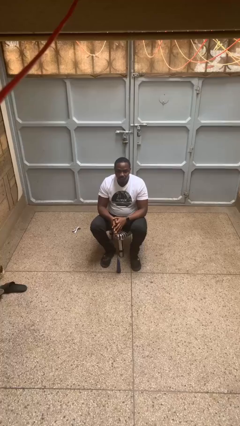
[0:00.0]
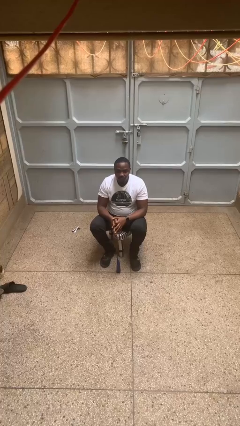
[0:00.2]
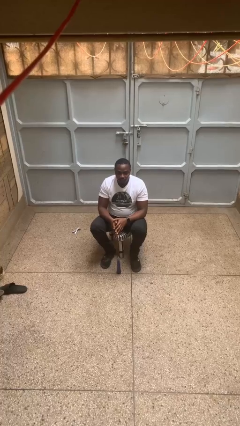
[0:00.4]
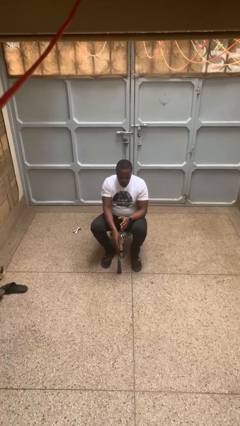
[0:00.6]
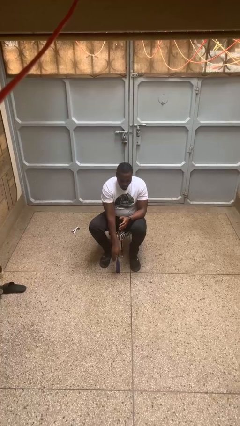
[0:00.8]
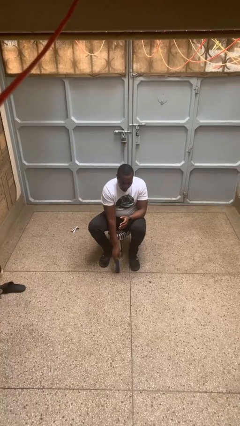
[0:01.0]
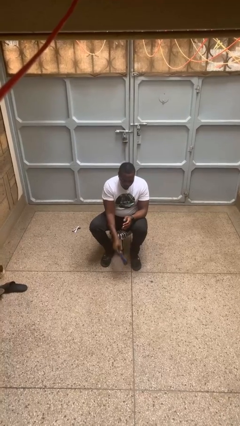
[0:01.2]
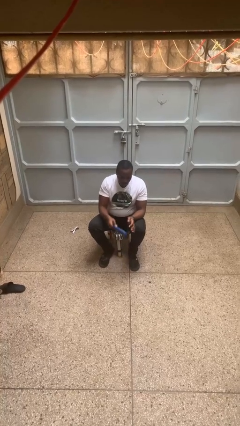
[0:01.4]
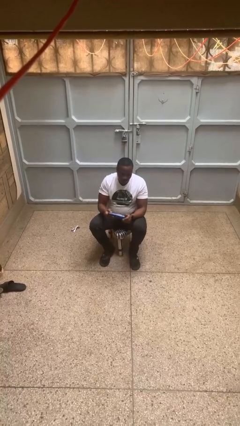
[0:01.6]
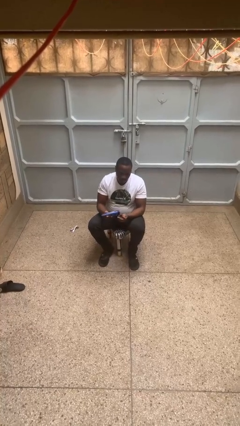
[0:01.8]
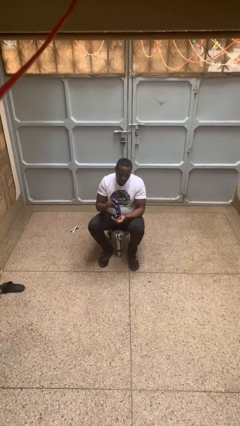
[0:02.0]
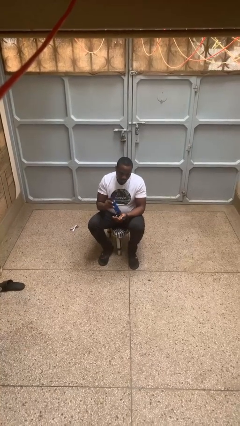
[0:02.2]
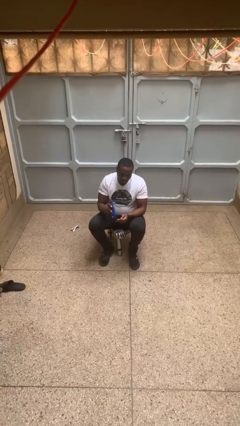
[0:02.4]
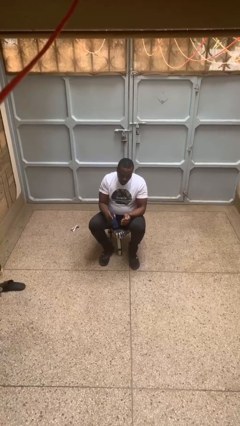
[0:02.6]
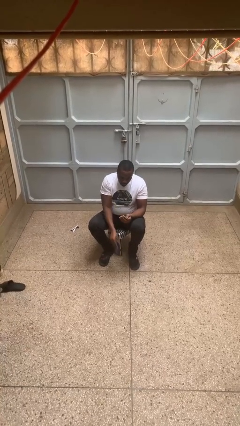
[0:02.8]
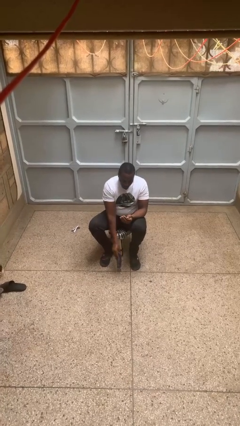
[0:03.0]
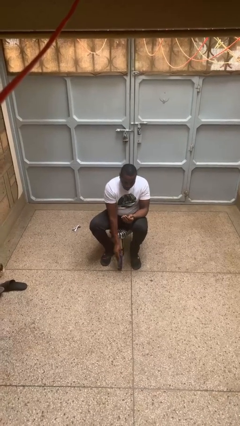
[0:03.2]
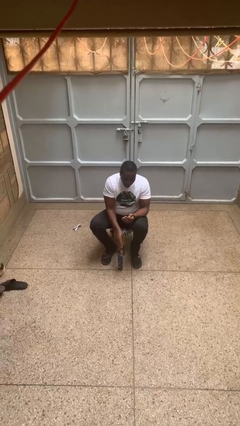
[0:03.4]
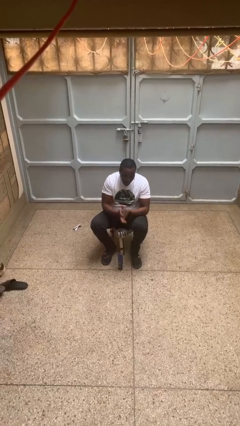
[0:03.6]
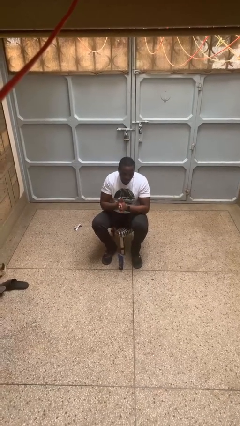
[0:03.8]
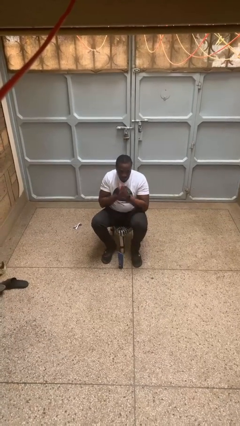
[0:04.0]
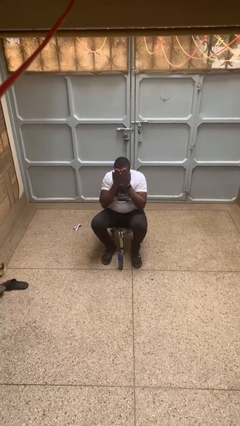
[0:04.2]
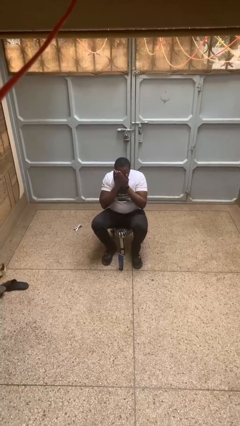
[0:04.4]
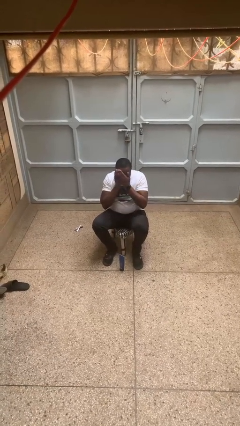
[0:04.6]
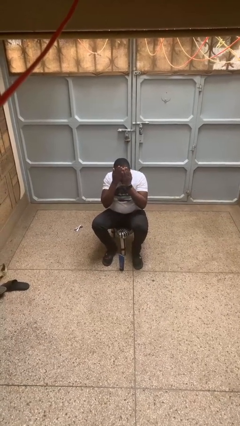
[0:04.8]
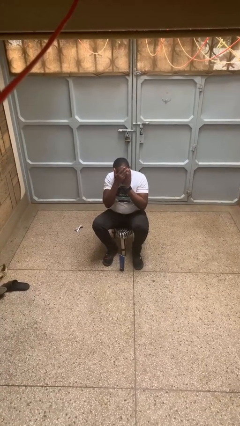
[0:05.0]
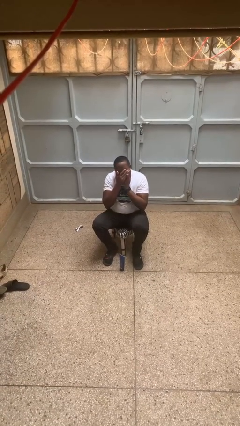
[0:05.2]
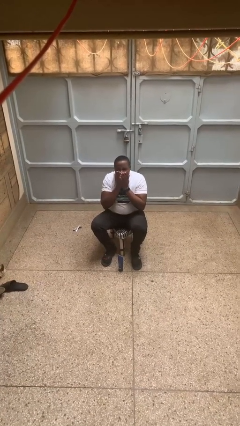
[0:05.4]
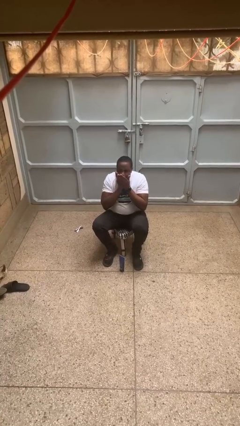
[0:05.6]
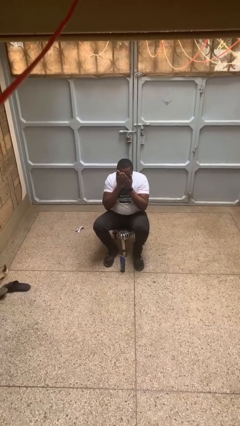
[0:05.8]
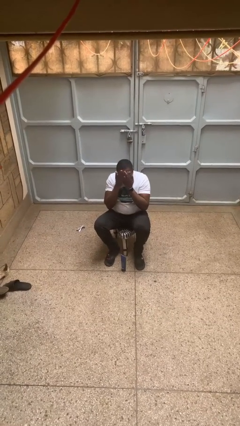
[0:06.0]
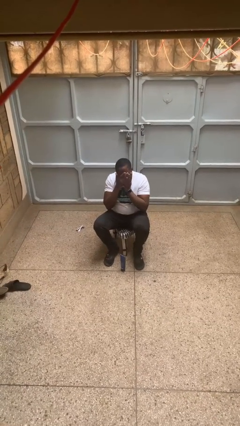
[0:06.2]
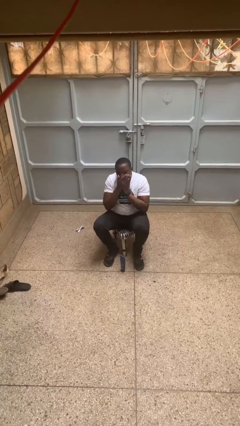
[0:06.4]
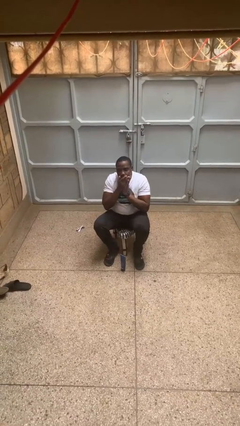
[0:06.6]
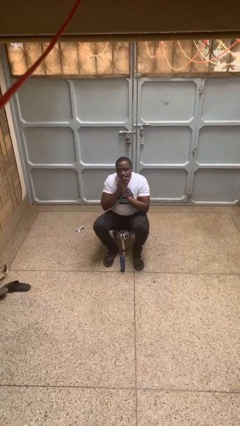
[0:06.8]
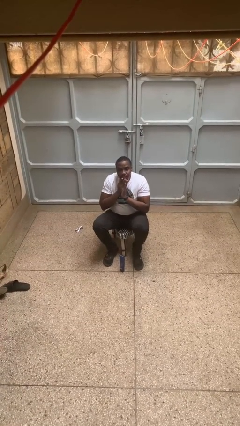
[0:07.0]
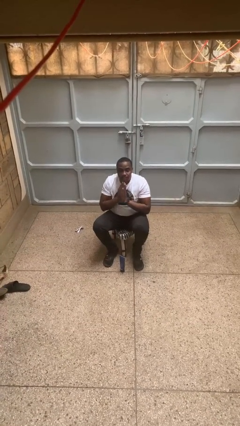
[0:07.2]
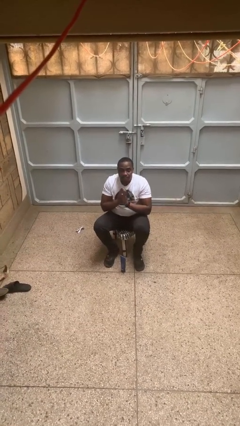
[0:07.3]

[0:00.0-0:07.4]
person applies facial moisturizer

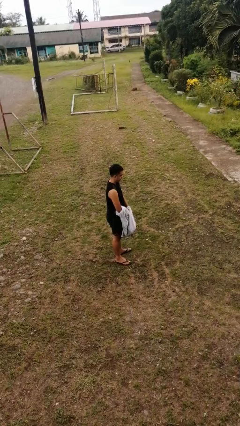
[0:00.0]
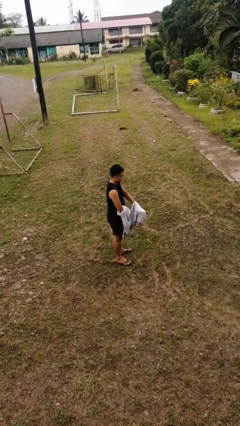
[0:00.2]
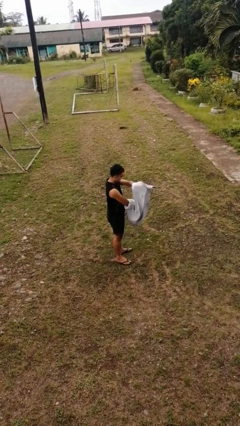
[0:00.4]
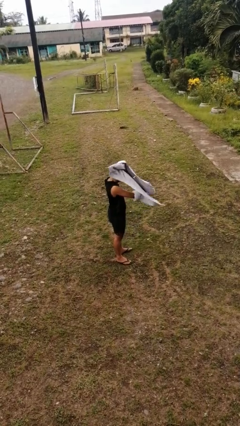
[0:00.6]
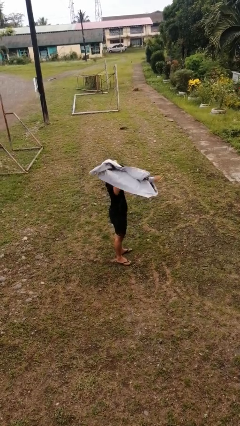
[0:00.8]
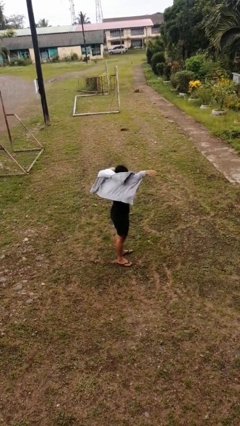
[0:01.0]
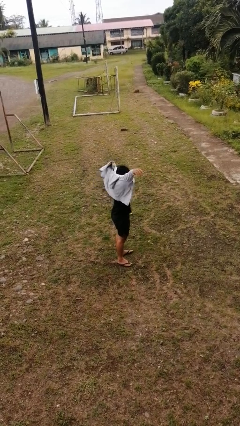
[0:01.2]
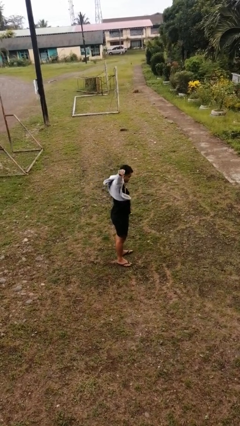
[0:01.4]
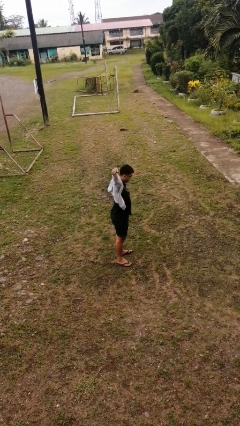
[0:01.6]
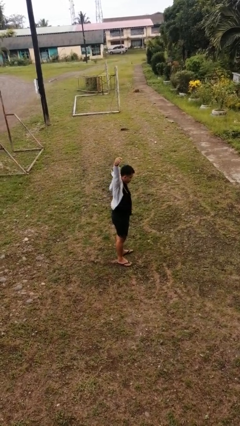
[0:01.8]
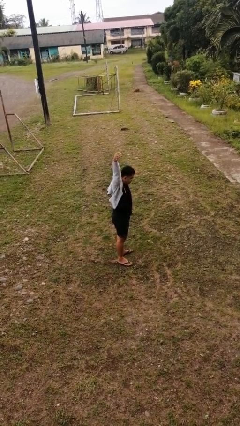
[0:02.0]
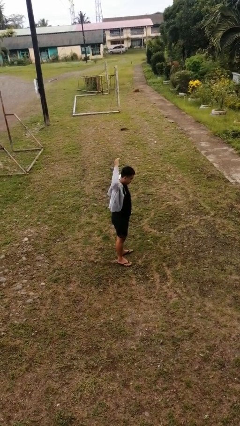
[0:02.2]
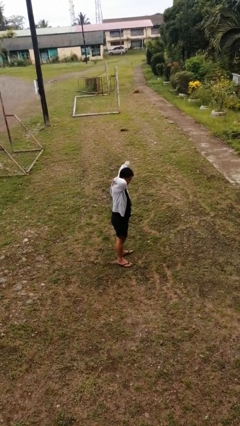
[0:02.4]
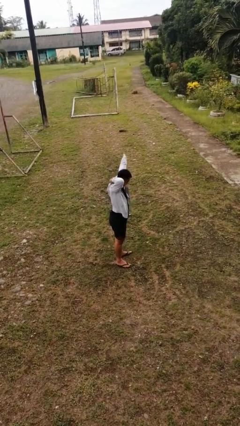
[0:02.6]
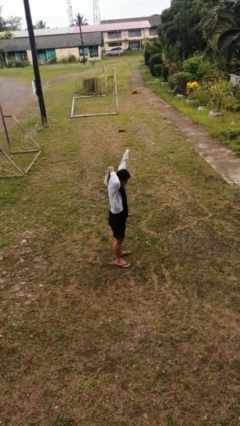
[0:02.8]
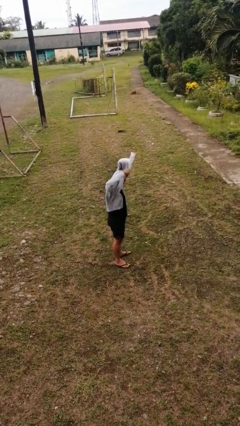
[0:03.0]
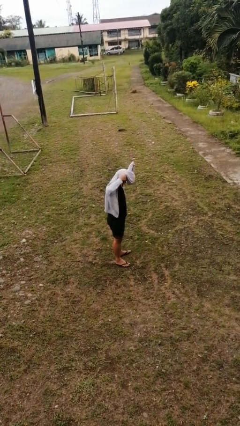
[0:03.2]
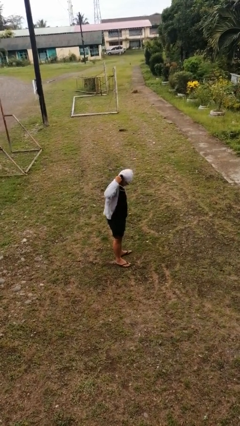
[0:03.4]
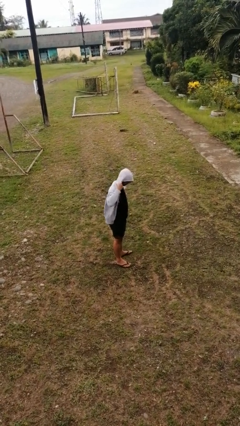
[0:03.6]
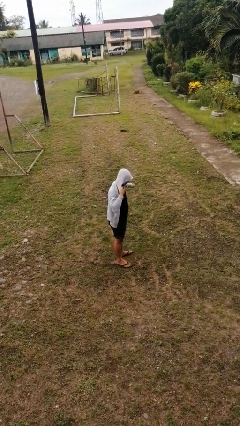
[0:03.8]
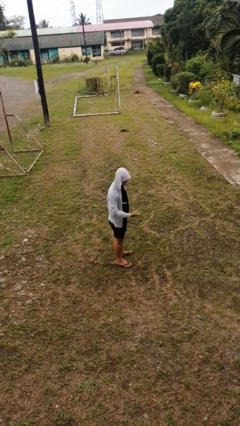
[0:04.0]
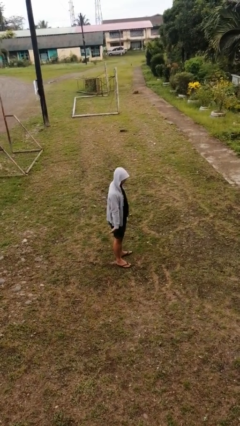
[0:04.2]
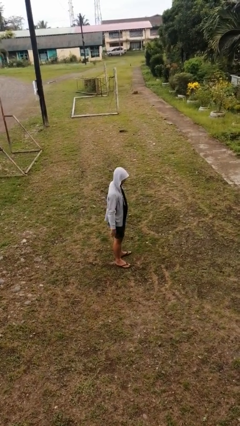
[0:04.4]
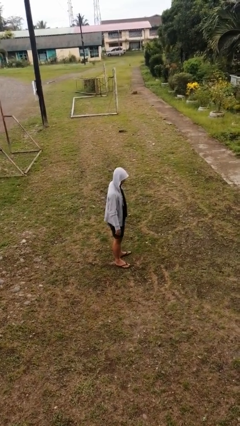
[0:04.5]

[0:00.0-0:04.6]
person puts on hoodie

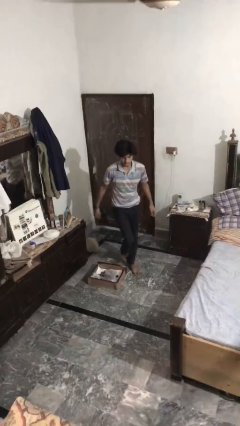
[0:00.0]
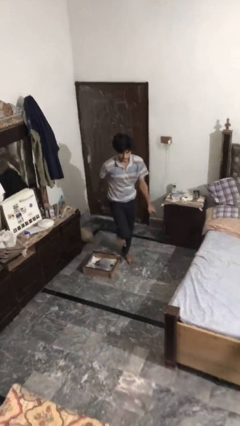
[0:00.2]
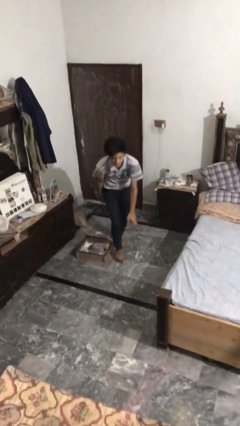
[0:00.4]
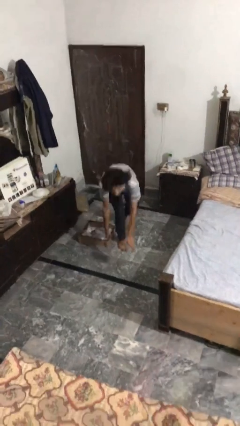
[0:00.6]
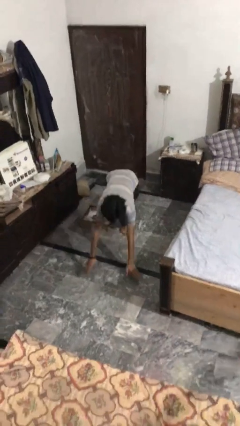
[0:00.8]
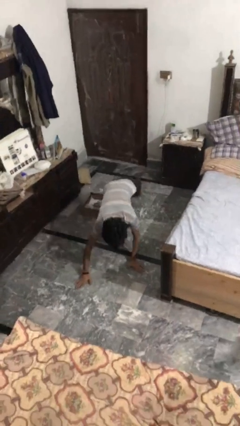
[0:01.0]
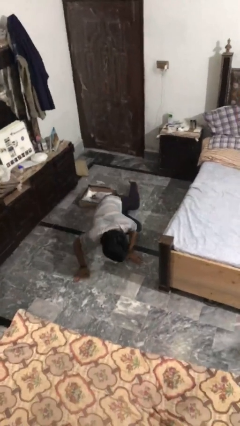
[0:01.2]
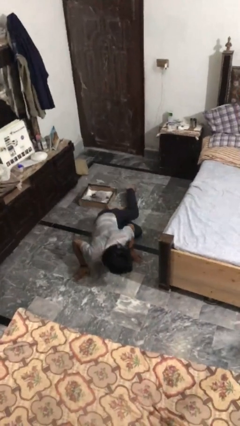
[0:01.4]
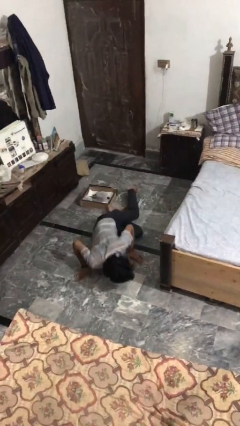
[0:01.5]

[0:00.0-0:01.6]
person trips on object on floor

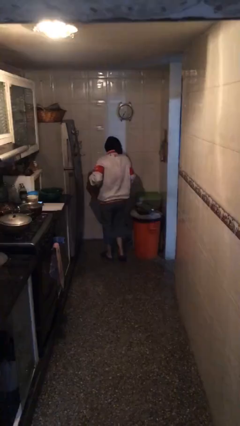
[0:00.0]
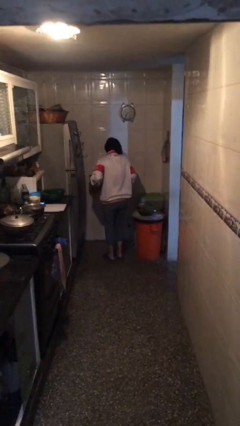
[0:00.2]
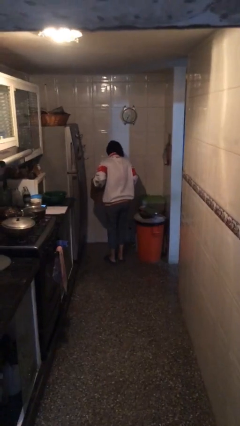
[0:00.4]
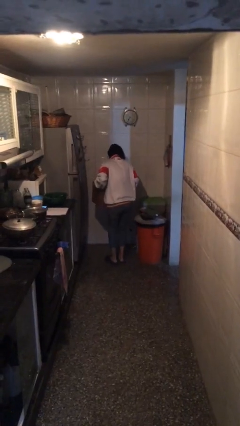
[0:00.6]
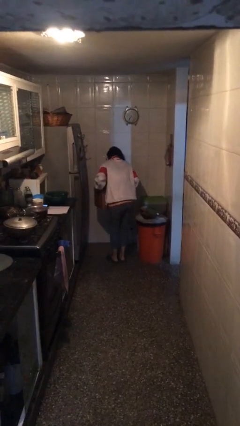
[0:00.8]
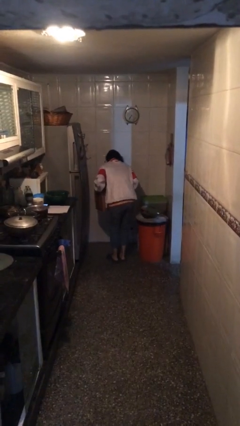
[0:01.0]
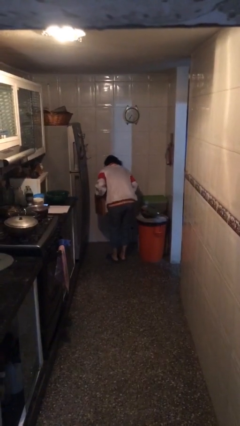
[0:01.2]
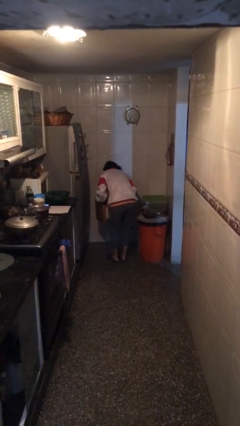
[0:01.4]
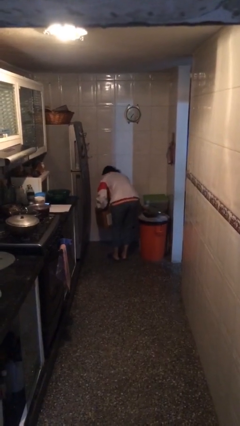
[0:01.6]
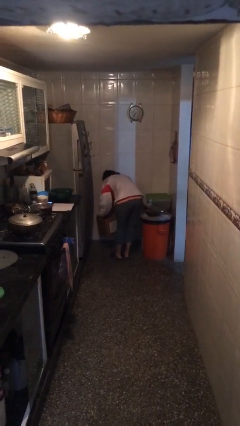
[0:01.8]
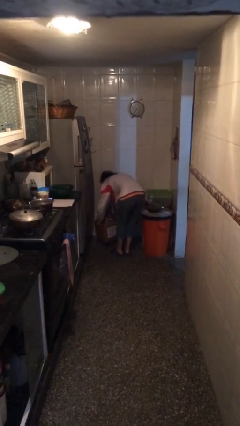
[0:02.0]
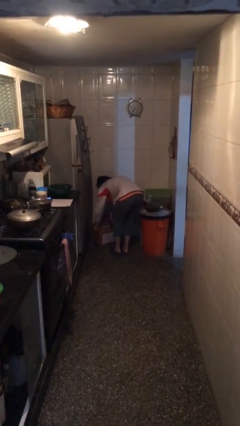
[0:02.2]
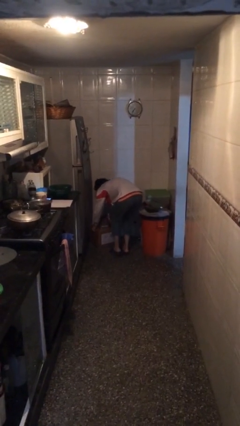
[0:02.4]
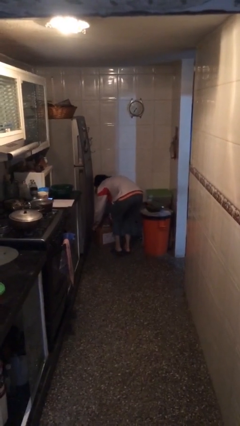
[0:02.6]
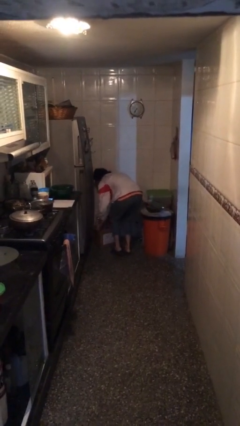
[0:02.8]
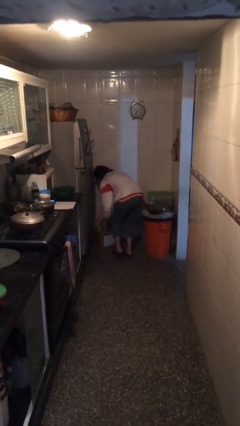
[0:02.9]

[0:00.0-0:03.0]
person puts down object on floor

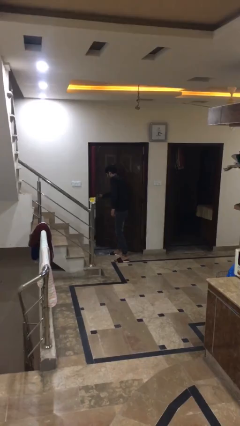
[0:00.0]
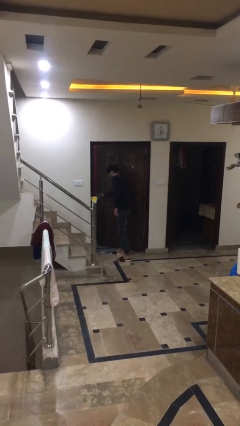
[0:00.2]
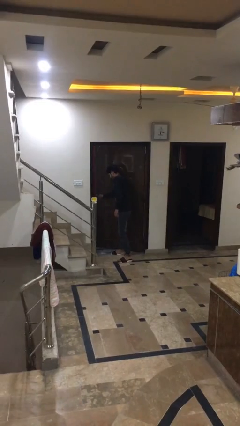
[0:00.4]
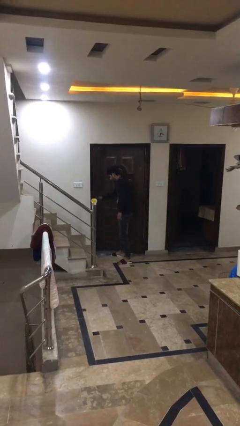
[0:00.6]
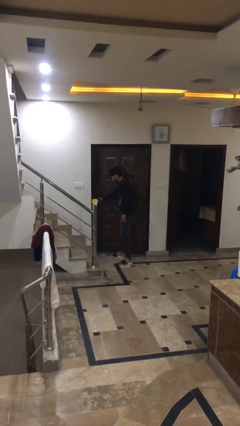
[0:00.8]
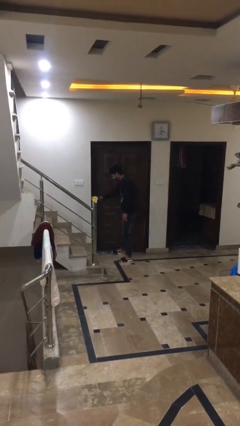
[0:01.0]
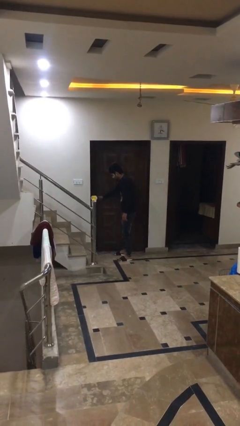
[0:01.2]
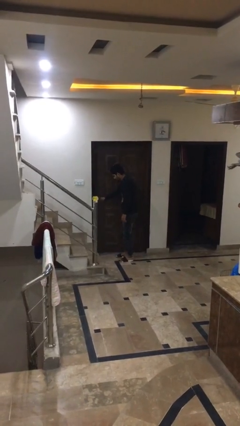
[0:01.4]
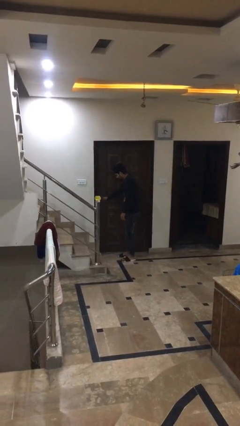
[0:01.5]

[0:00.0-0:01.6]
person closes facility door
